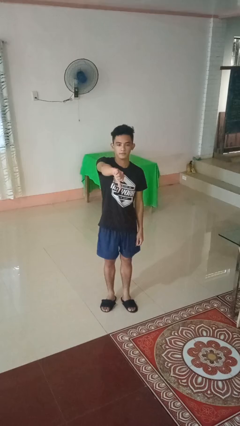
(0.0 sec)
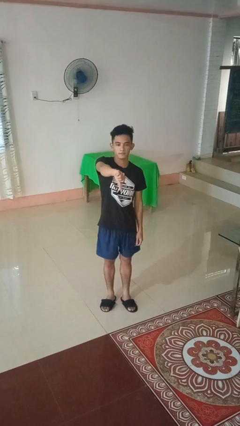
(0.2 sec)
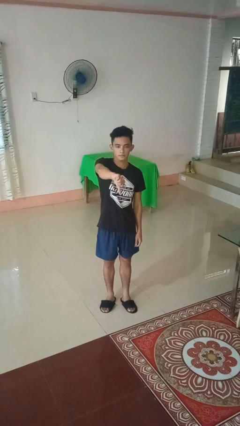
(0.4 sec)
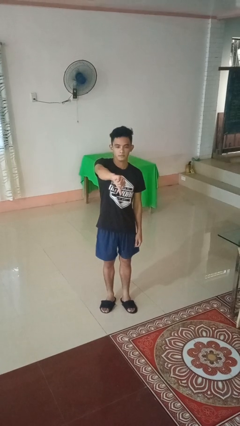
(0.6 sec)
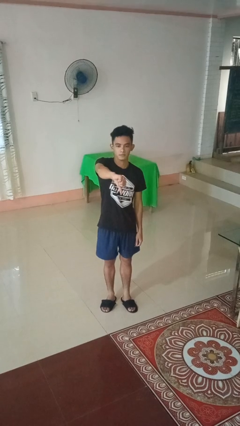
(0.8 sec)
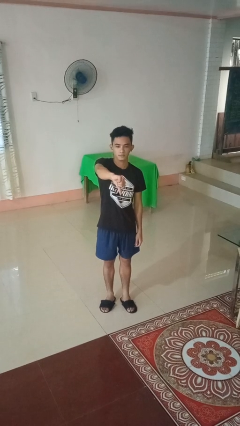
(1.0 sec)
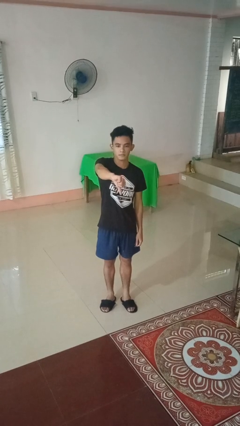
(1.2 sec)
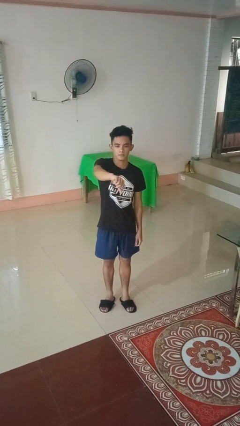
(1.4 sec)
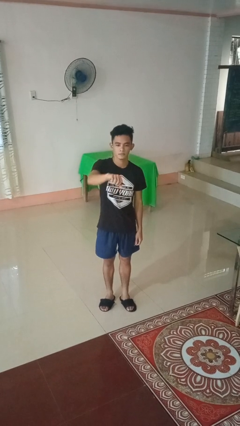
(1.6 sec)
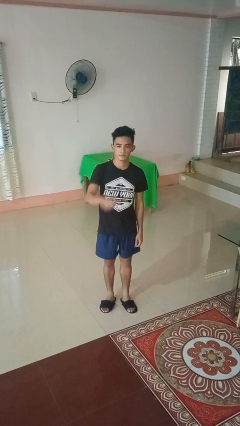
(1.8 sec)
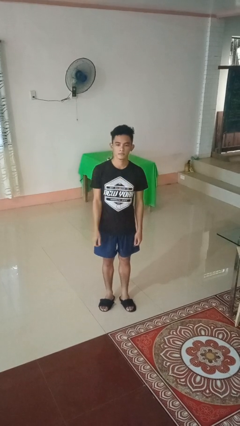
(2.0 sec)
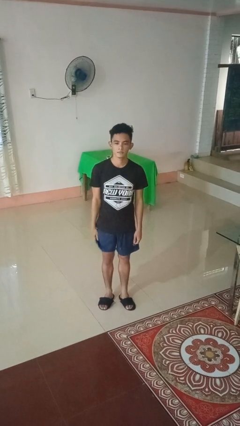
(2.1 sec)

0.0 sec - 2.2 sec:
person gestures thumbs down

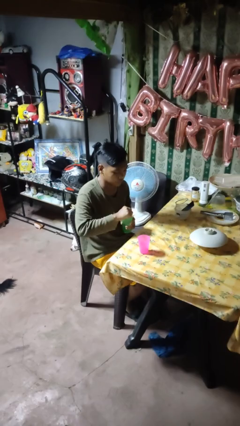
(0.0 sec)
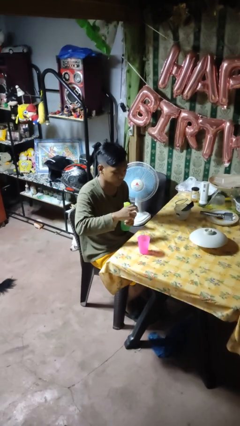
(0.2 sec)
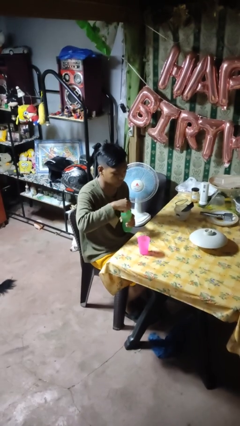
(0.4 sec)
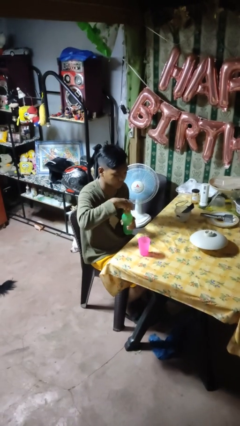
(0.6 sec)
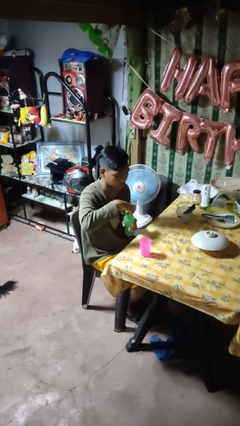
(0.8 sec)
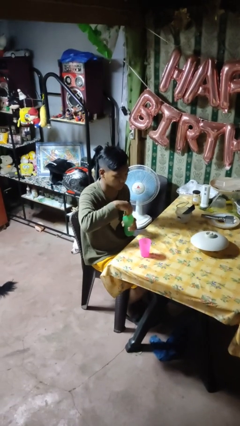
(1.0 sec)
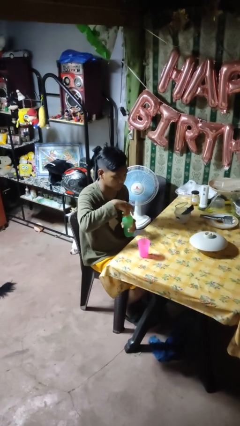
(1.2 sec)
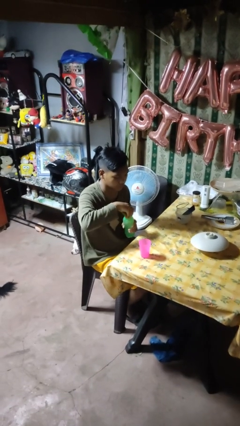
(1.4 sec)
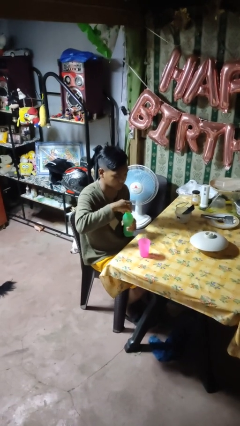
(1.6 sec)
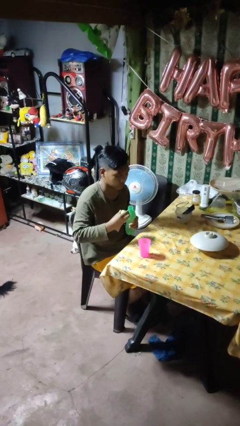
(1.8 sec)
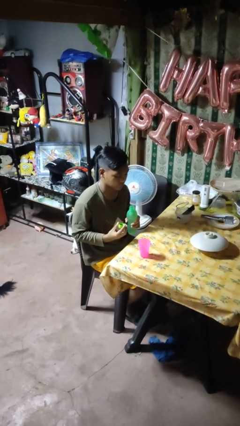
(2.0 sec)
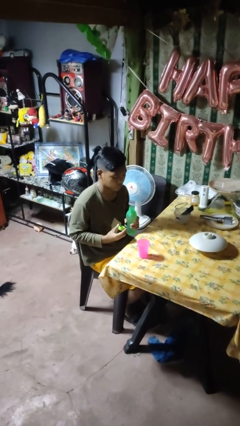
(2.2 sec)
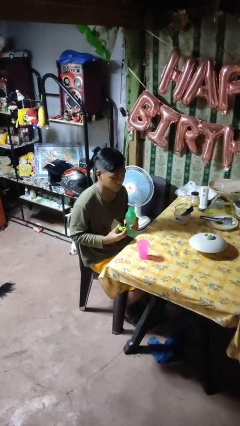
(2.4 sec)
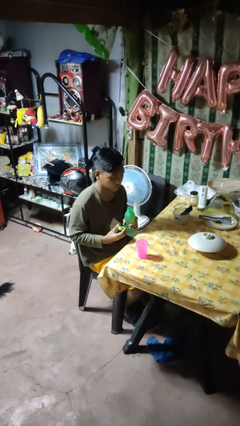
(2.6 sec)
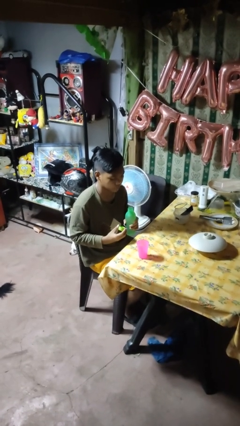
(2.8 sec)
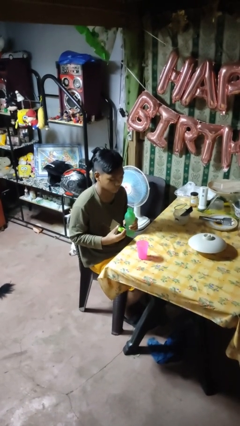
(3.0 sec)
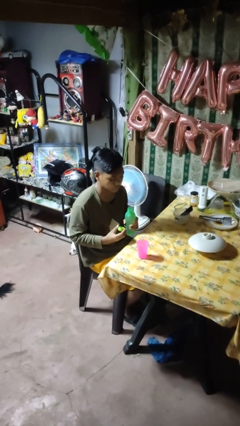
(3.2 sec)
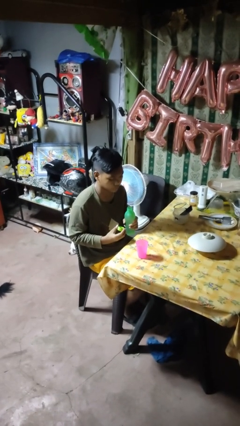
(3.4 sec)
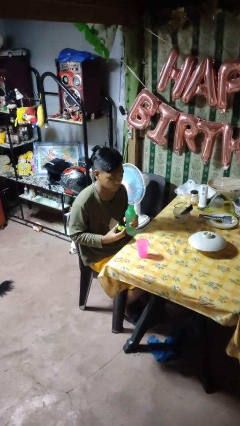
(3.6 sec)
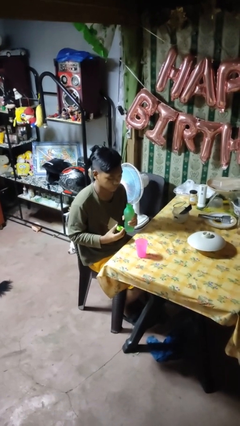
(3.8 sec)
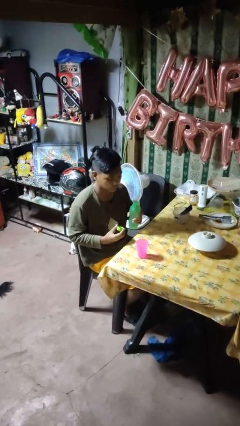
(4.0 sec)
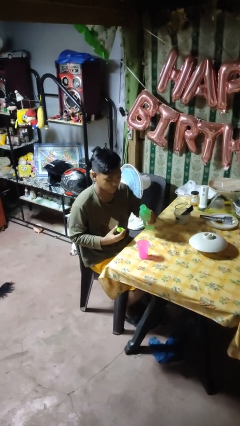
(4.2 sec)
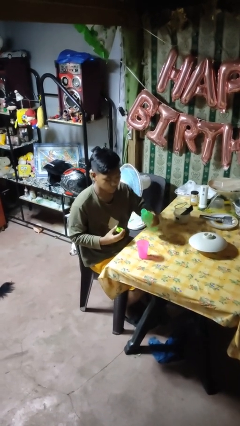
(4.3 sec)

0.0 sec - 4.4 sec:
person unscrews lid from bottle

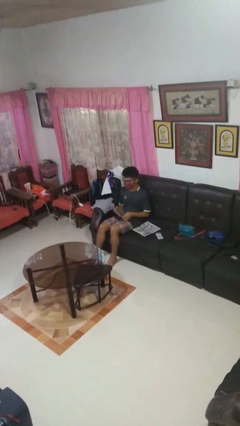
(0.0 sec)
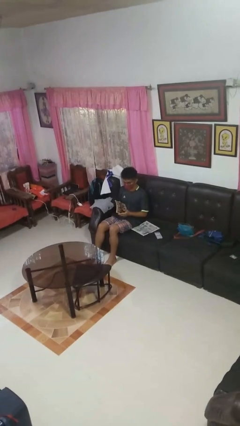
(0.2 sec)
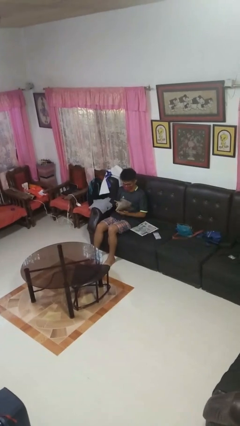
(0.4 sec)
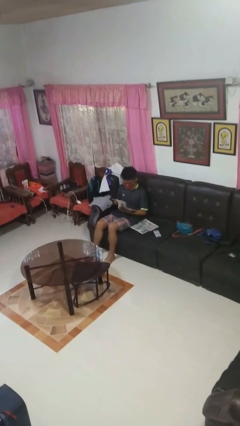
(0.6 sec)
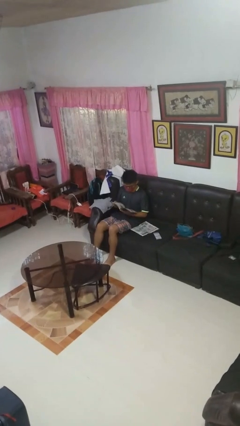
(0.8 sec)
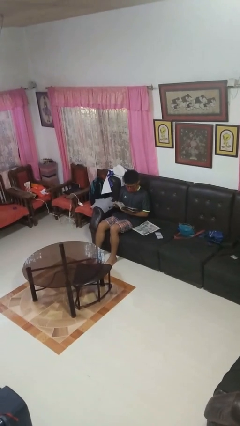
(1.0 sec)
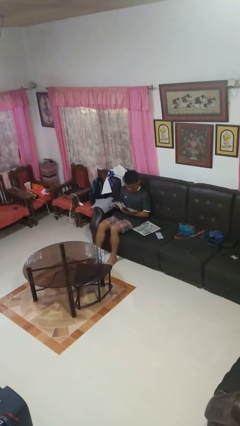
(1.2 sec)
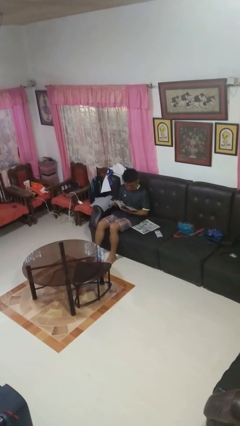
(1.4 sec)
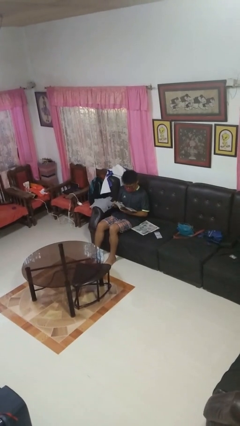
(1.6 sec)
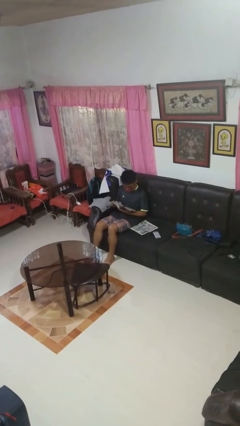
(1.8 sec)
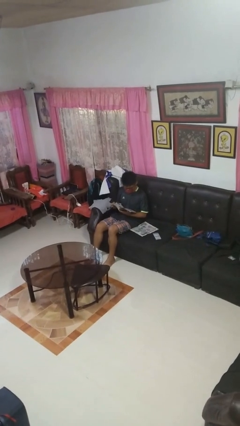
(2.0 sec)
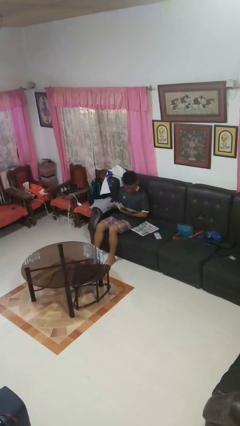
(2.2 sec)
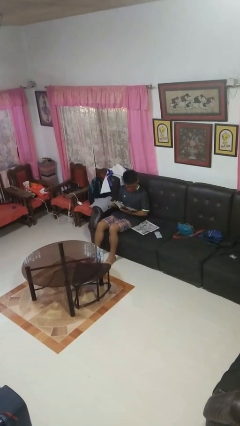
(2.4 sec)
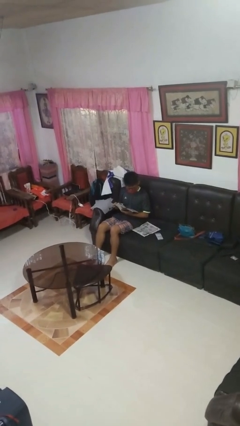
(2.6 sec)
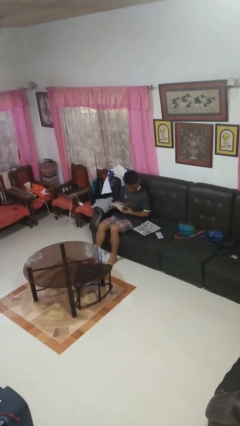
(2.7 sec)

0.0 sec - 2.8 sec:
person reads magazine

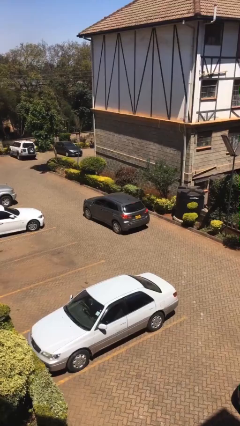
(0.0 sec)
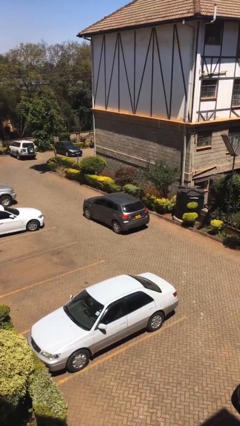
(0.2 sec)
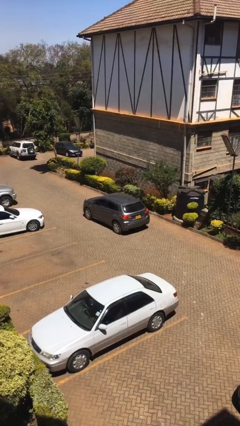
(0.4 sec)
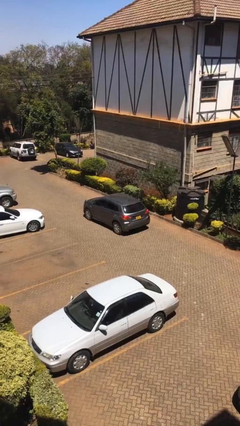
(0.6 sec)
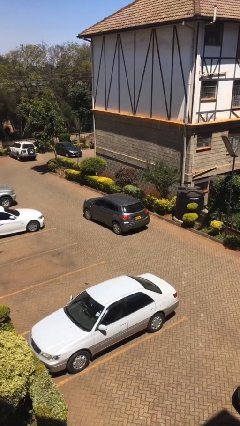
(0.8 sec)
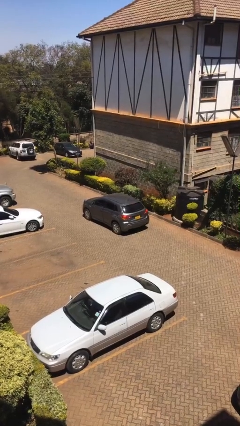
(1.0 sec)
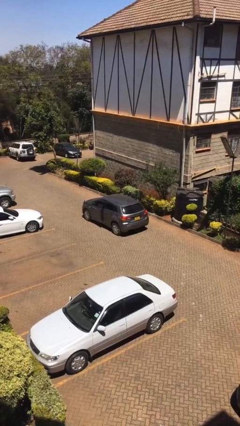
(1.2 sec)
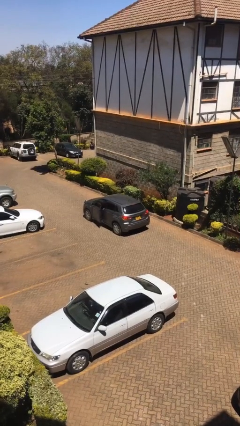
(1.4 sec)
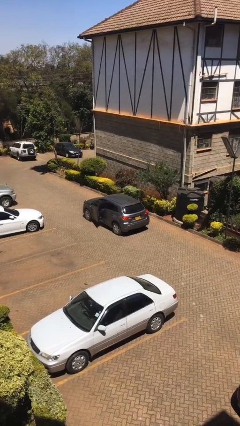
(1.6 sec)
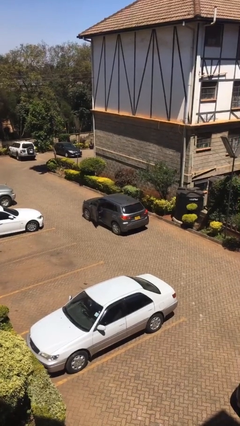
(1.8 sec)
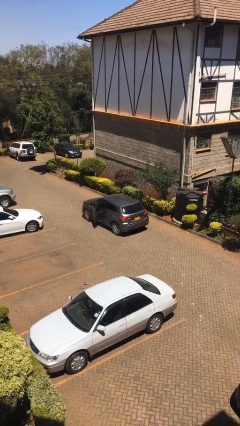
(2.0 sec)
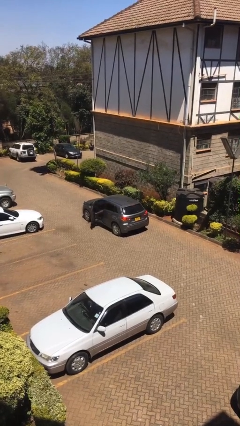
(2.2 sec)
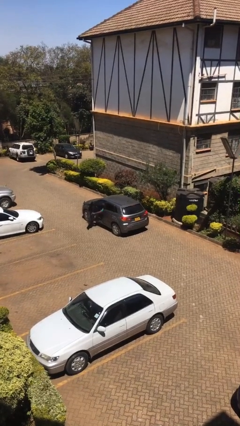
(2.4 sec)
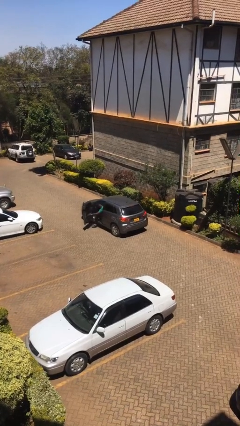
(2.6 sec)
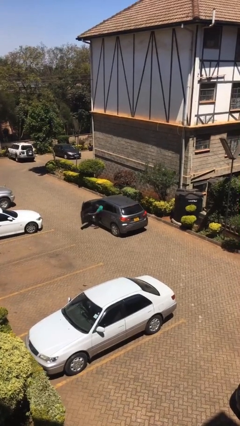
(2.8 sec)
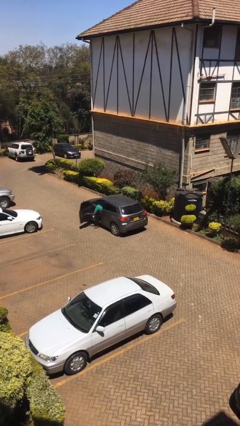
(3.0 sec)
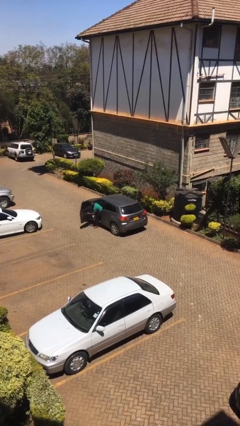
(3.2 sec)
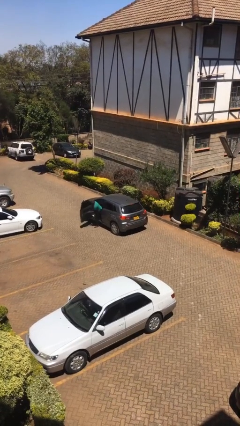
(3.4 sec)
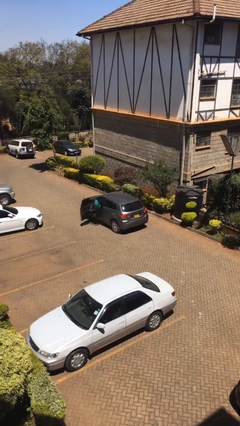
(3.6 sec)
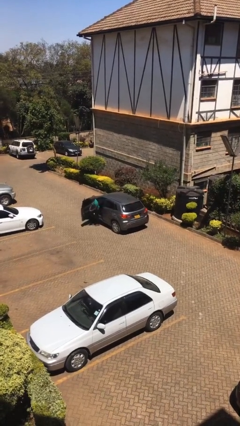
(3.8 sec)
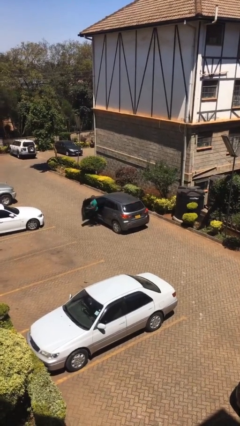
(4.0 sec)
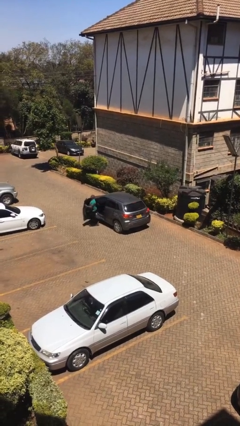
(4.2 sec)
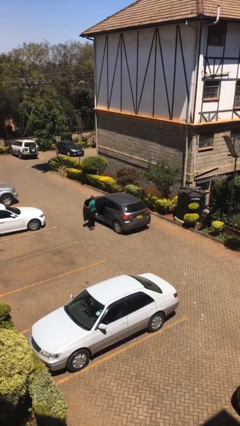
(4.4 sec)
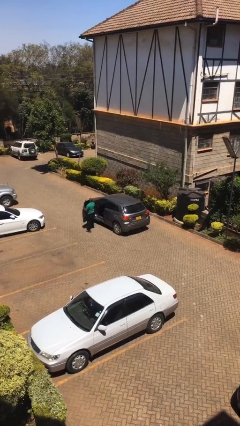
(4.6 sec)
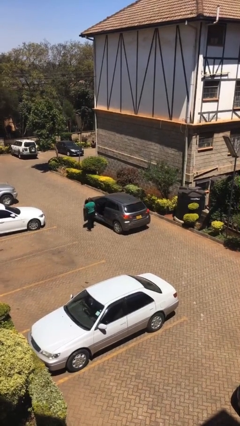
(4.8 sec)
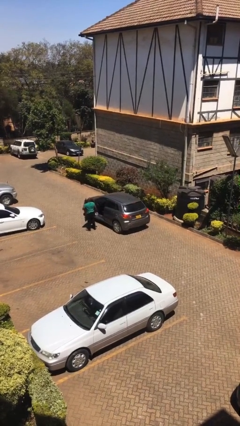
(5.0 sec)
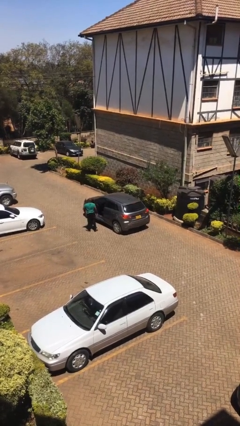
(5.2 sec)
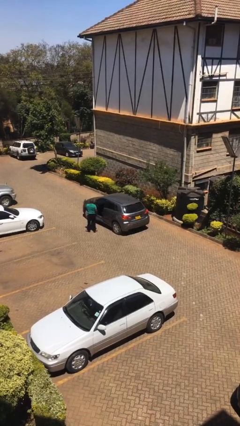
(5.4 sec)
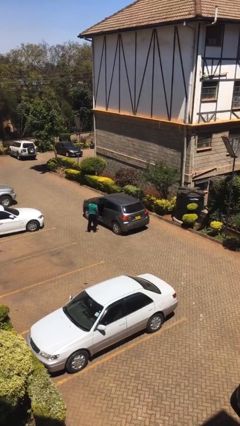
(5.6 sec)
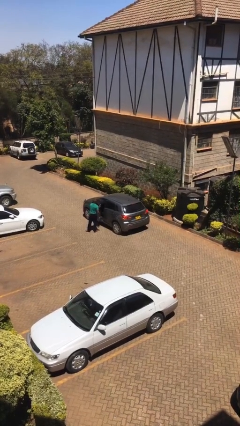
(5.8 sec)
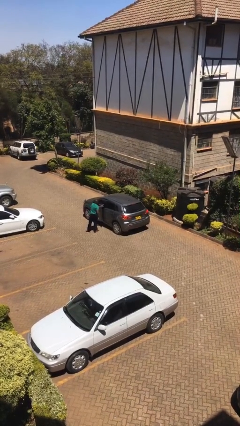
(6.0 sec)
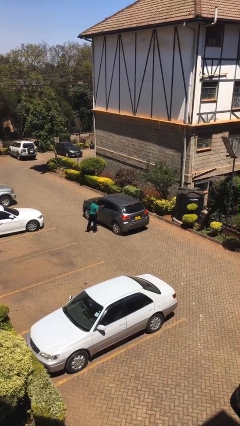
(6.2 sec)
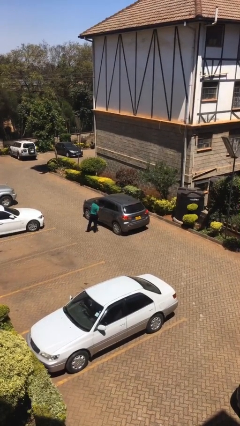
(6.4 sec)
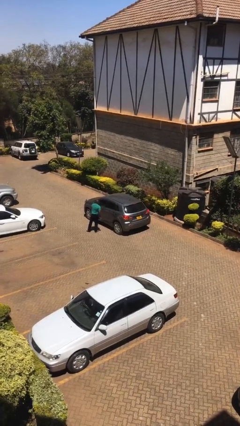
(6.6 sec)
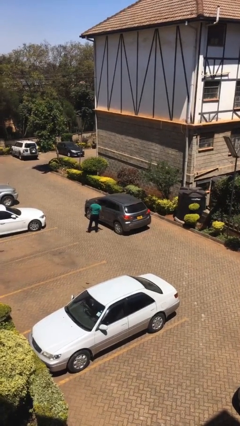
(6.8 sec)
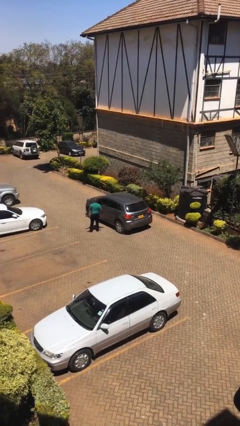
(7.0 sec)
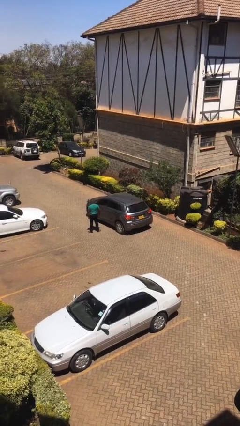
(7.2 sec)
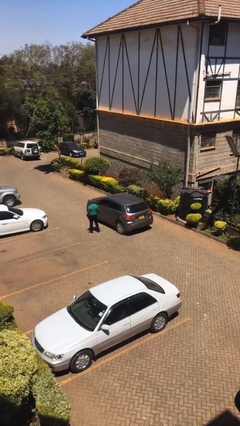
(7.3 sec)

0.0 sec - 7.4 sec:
car drops off person

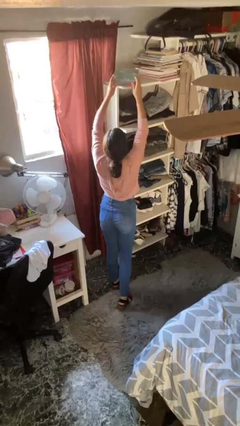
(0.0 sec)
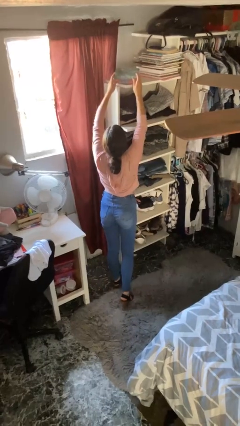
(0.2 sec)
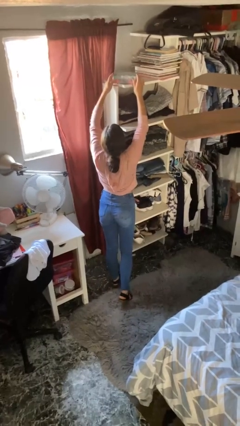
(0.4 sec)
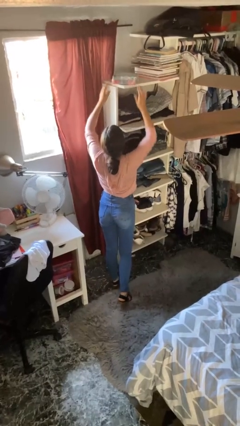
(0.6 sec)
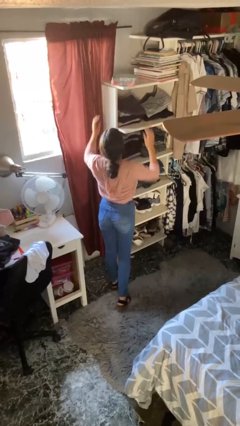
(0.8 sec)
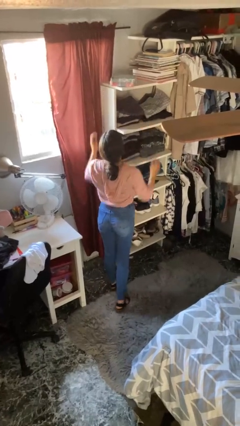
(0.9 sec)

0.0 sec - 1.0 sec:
person puts down object on shelf
